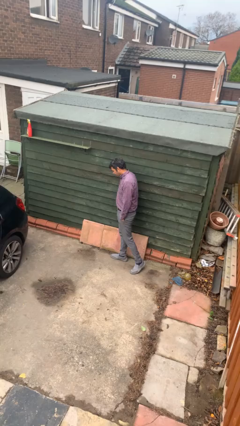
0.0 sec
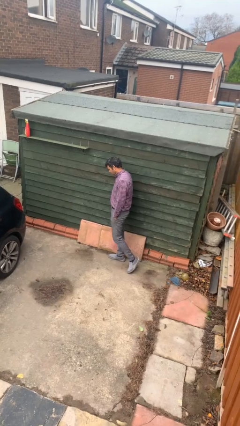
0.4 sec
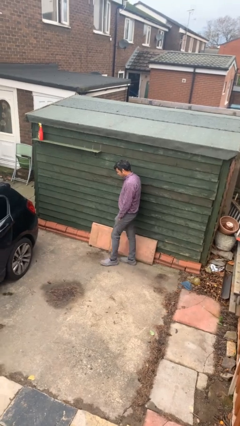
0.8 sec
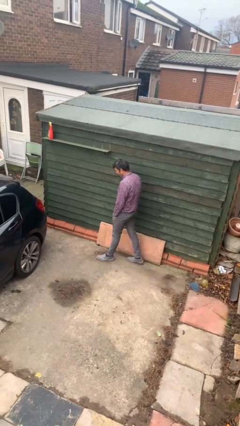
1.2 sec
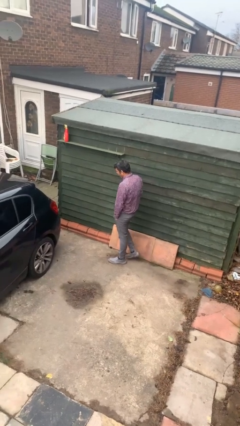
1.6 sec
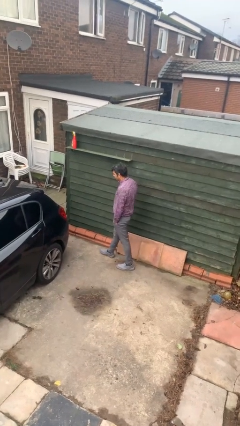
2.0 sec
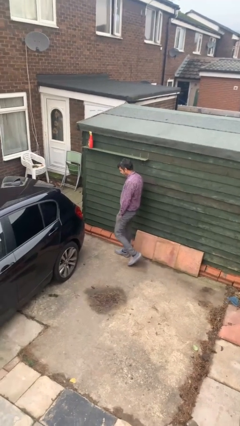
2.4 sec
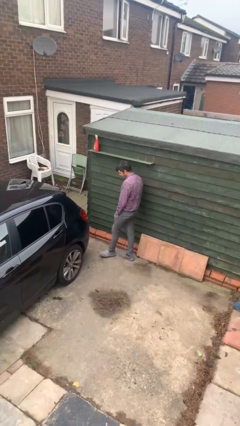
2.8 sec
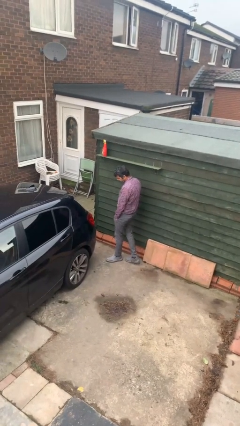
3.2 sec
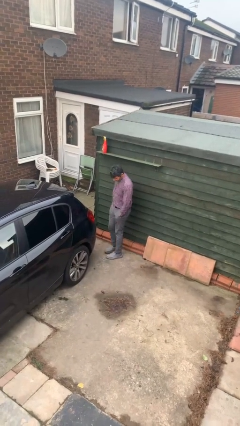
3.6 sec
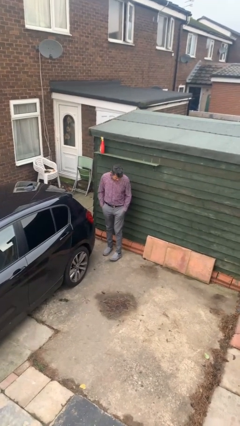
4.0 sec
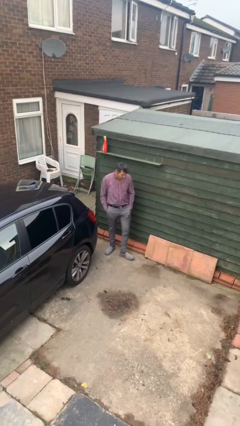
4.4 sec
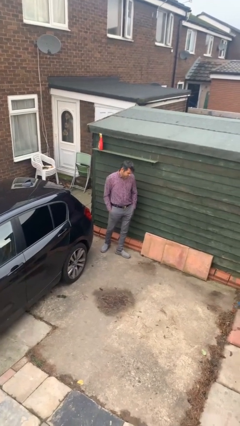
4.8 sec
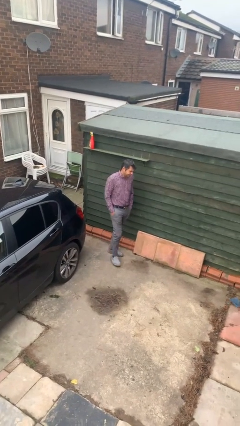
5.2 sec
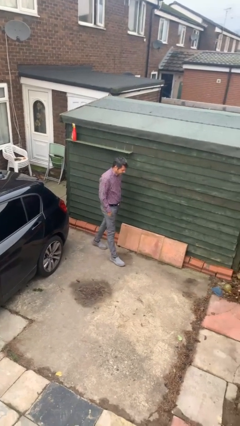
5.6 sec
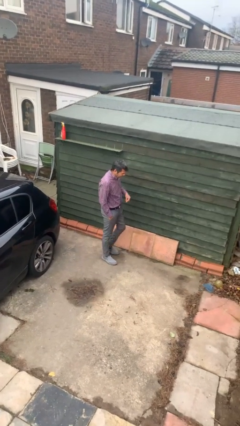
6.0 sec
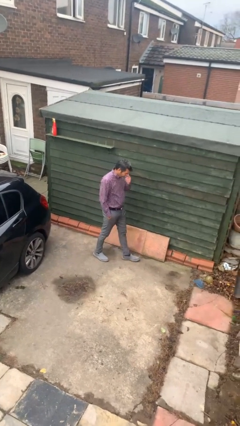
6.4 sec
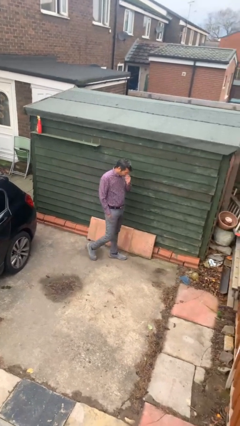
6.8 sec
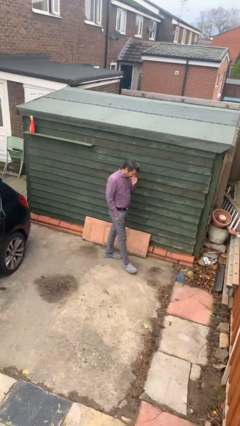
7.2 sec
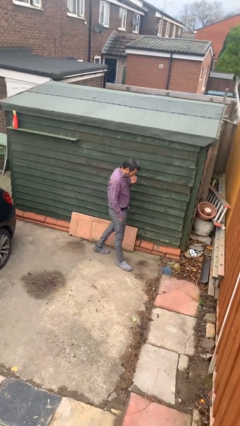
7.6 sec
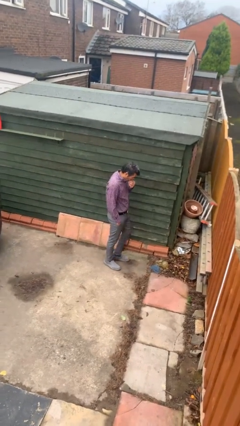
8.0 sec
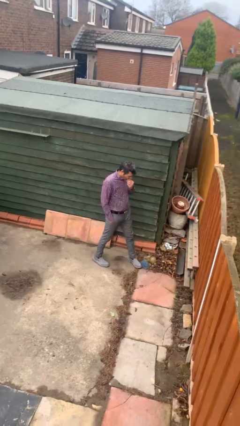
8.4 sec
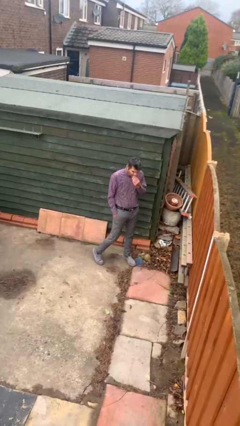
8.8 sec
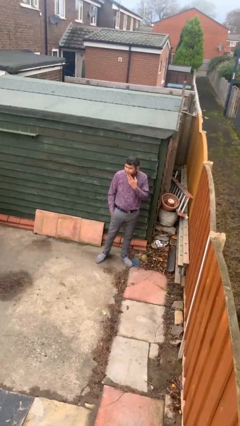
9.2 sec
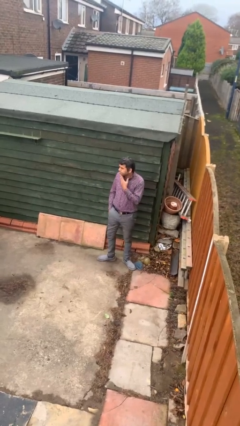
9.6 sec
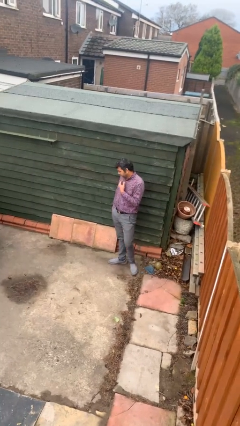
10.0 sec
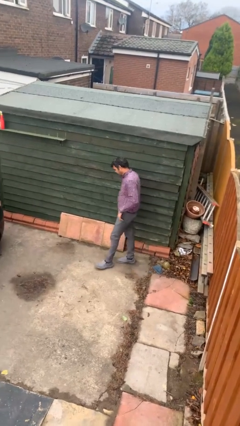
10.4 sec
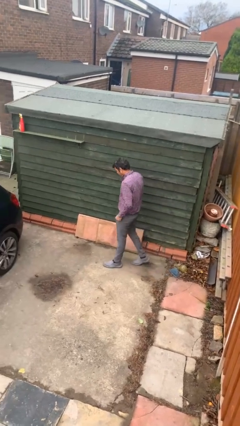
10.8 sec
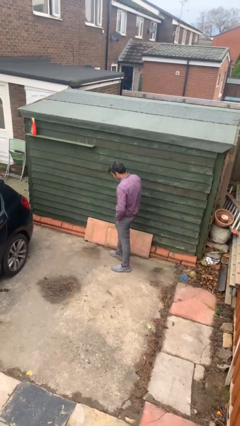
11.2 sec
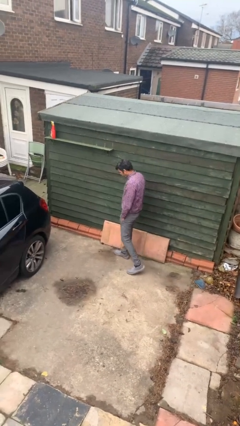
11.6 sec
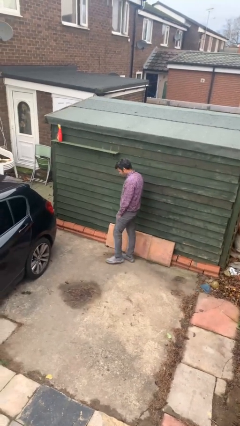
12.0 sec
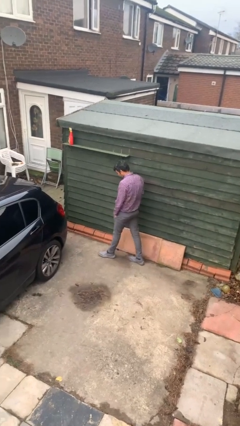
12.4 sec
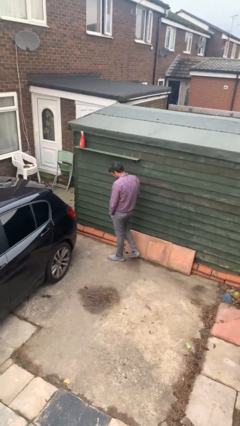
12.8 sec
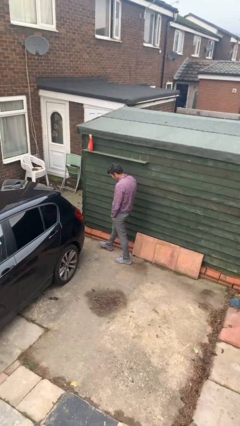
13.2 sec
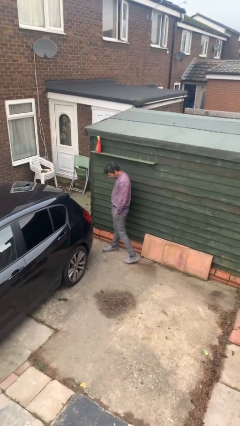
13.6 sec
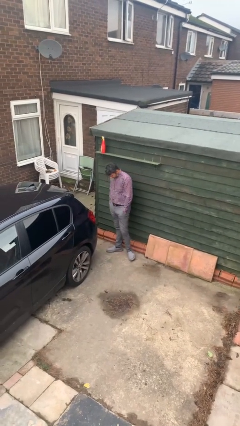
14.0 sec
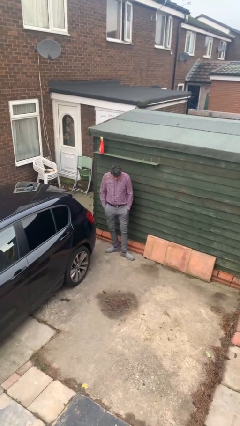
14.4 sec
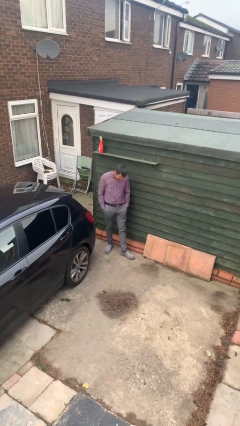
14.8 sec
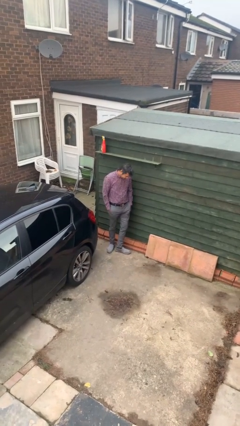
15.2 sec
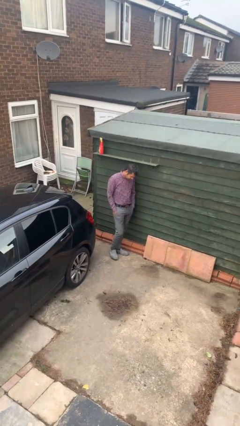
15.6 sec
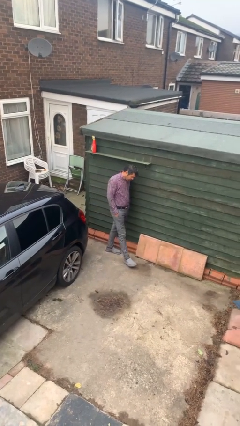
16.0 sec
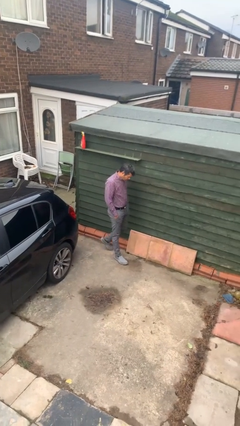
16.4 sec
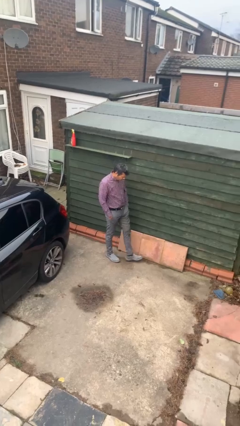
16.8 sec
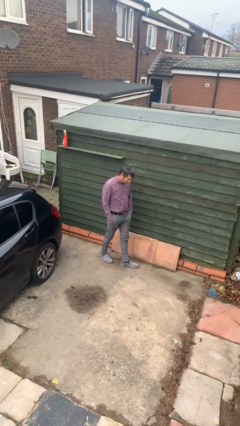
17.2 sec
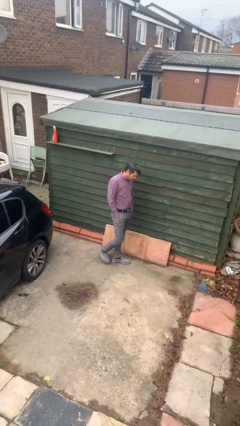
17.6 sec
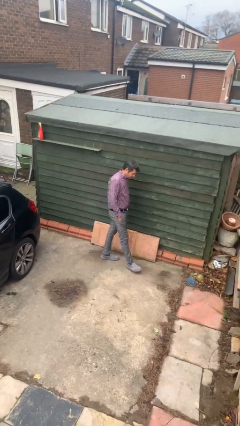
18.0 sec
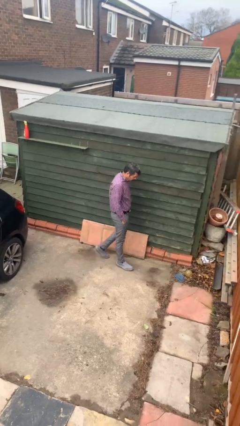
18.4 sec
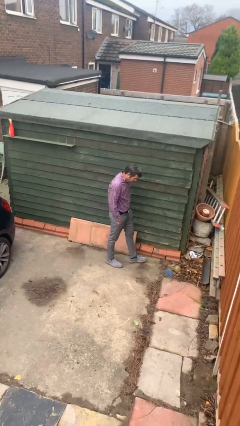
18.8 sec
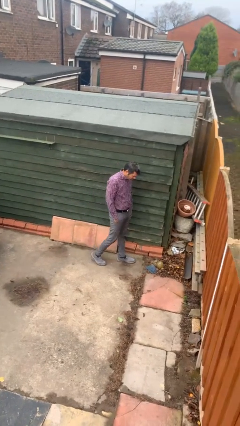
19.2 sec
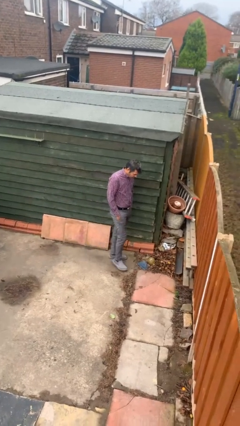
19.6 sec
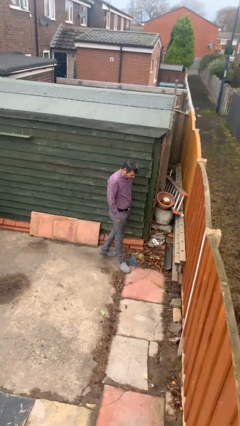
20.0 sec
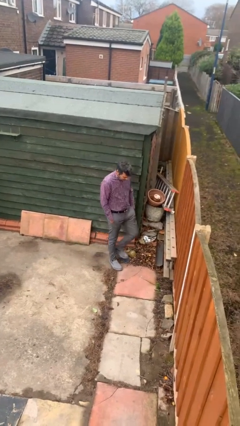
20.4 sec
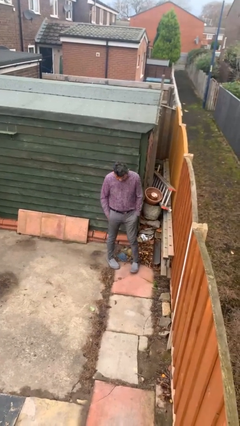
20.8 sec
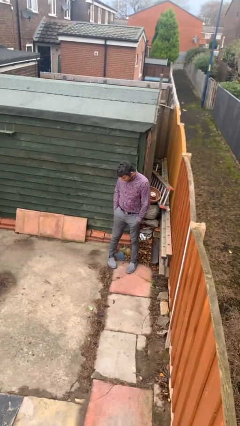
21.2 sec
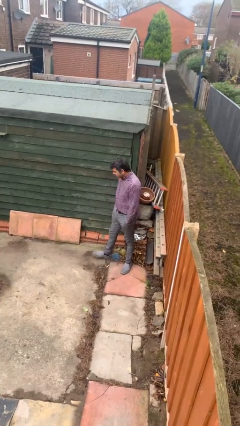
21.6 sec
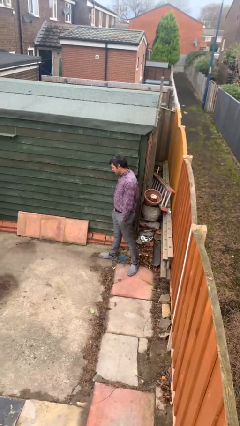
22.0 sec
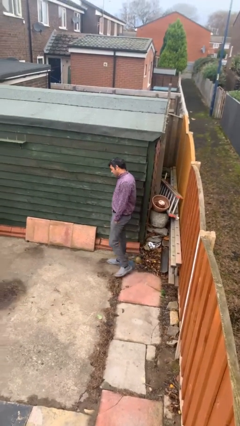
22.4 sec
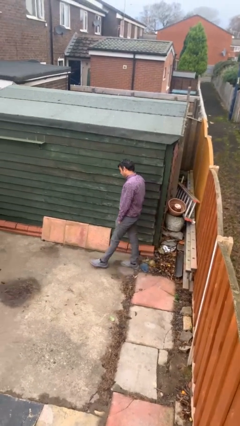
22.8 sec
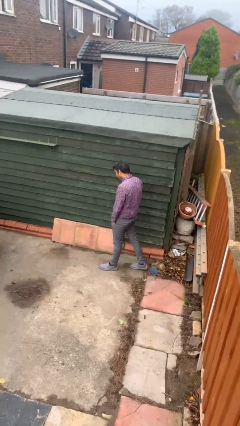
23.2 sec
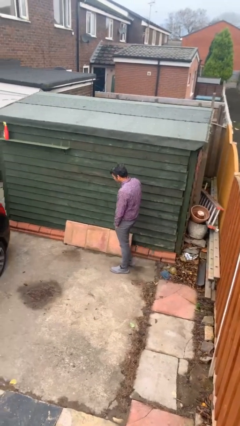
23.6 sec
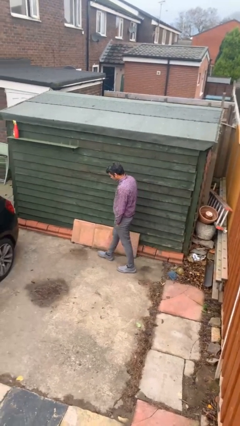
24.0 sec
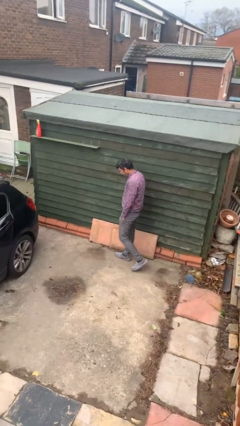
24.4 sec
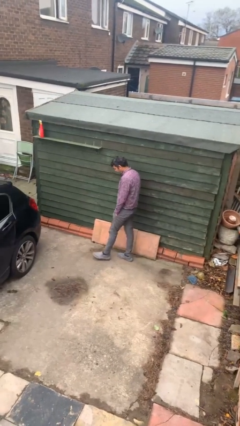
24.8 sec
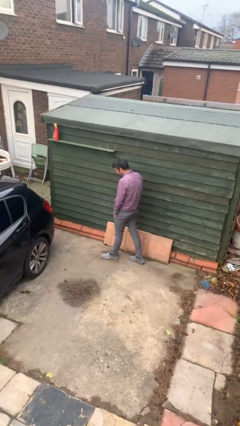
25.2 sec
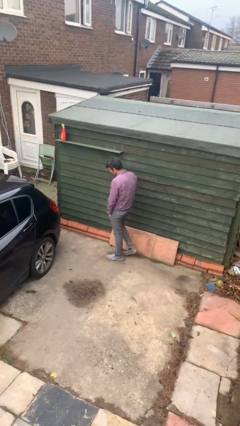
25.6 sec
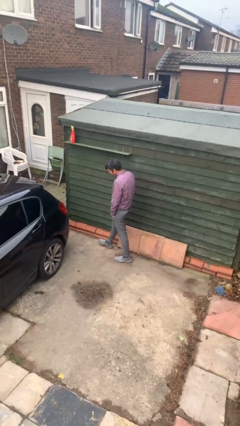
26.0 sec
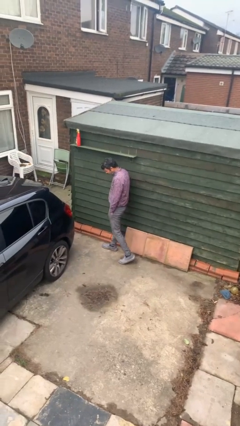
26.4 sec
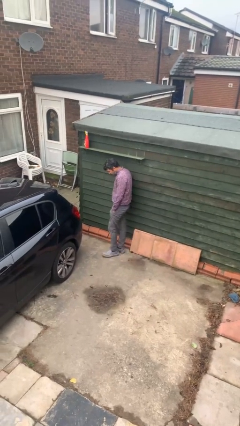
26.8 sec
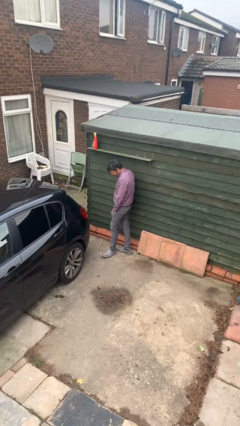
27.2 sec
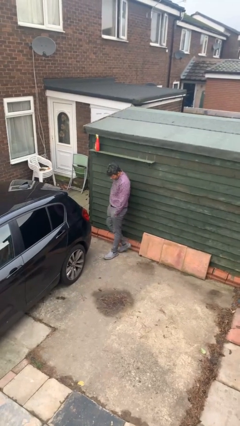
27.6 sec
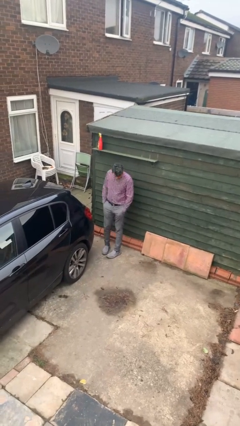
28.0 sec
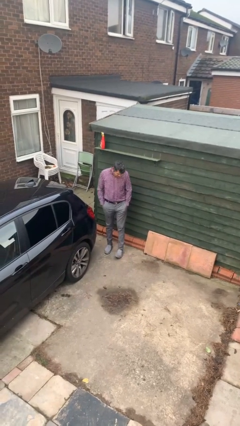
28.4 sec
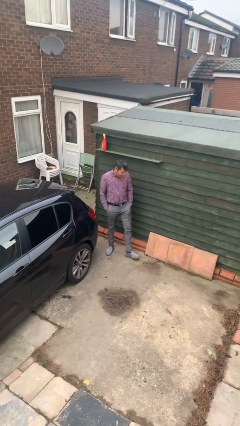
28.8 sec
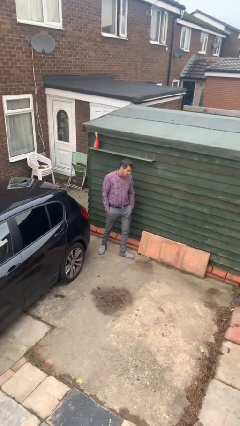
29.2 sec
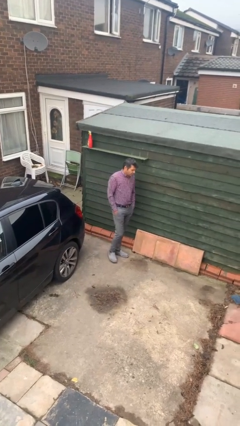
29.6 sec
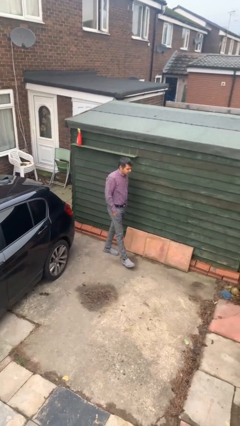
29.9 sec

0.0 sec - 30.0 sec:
person walks

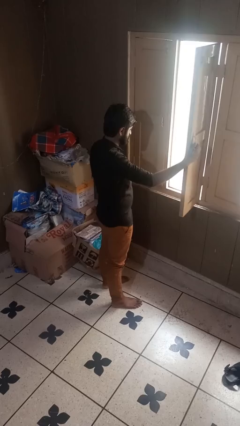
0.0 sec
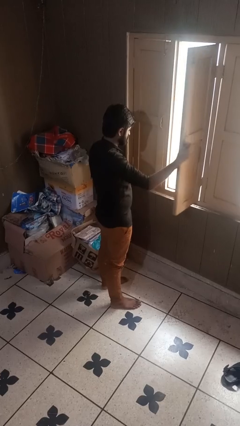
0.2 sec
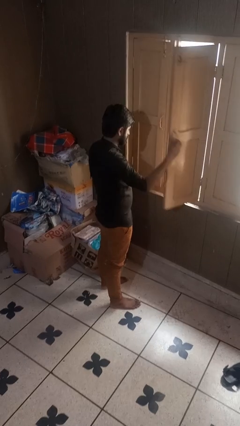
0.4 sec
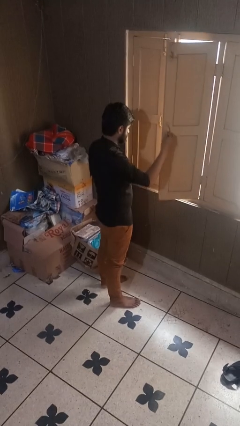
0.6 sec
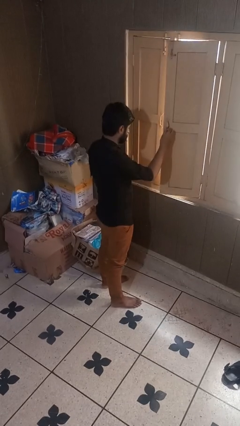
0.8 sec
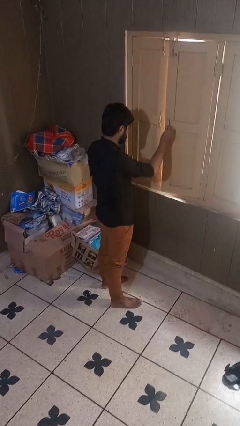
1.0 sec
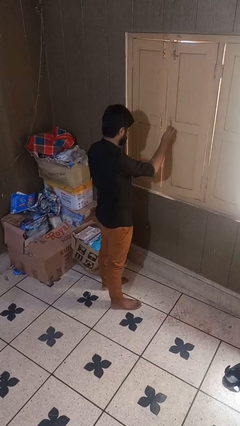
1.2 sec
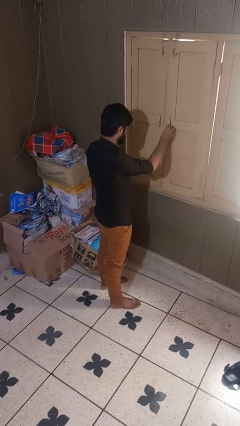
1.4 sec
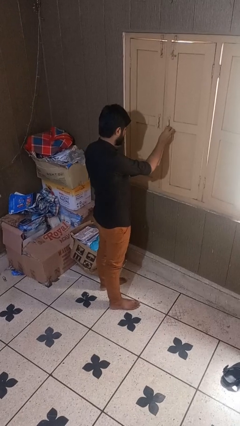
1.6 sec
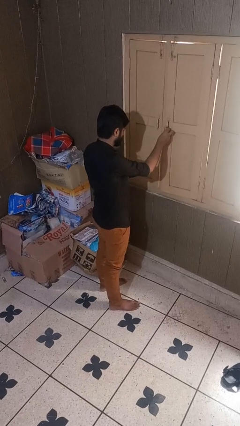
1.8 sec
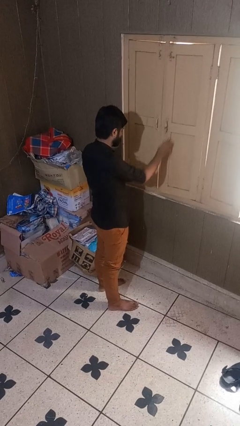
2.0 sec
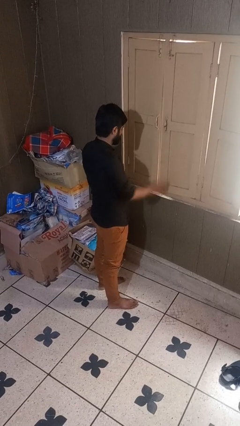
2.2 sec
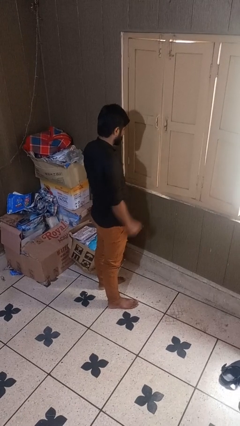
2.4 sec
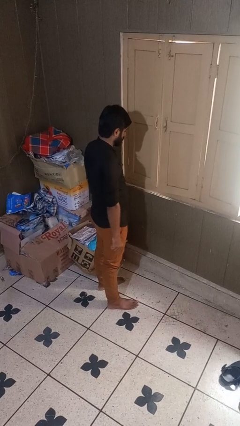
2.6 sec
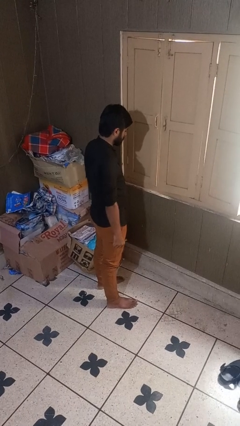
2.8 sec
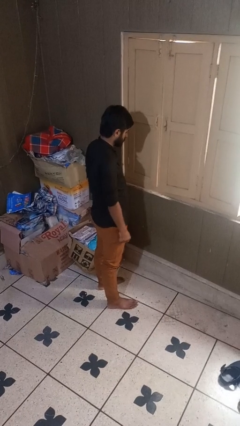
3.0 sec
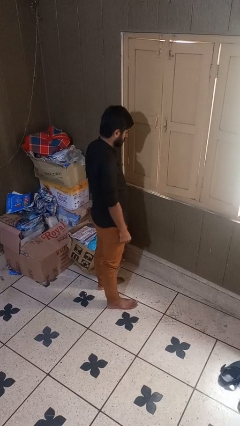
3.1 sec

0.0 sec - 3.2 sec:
person closes home window

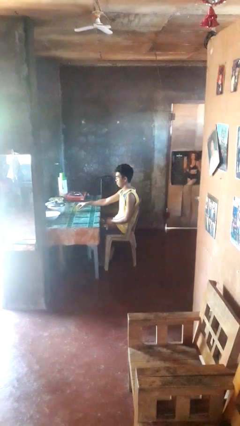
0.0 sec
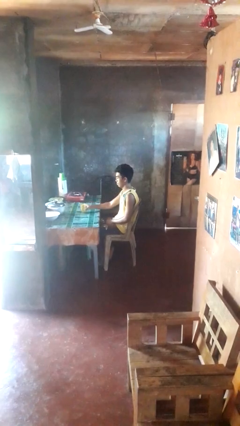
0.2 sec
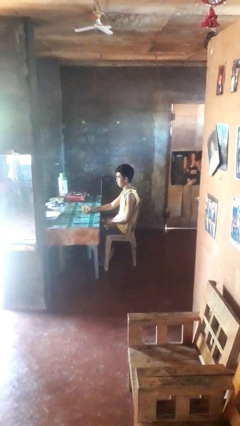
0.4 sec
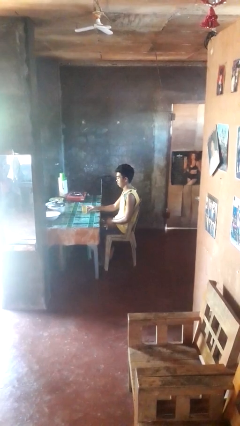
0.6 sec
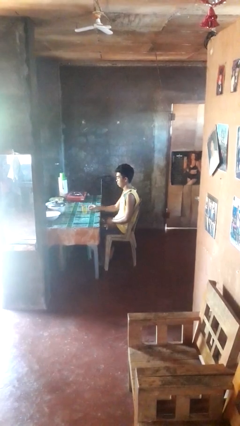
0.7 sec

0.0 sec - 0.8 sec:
person sets upright glass
